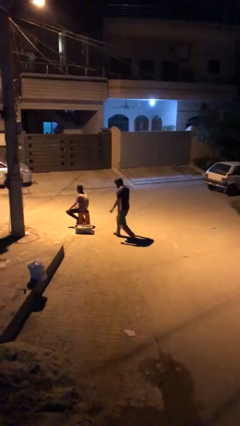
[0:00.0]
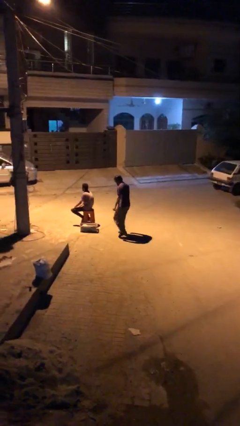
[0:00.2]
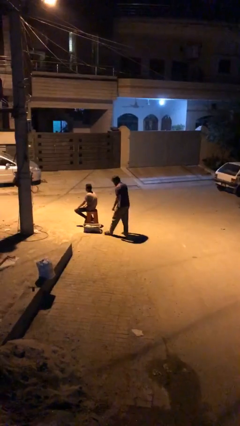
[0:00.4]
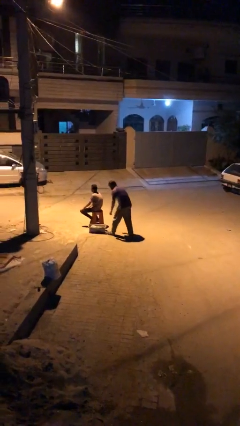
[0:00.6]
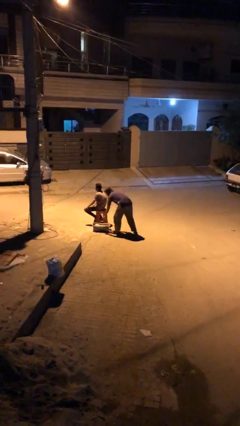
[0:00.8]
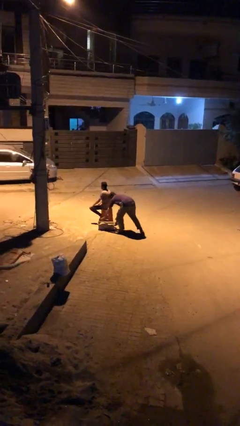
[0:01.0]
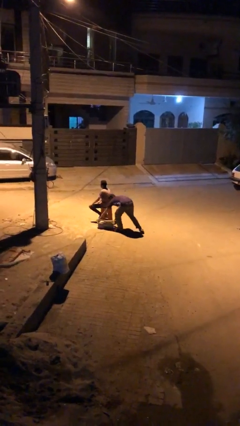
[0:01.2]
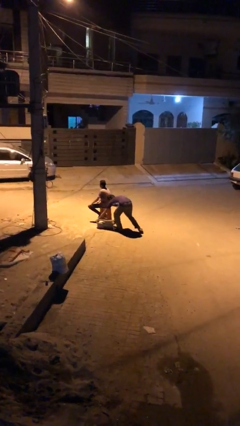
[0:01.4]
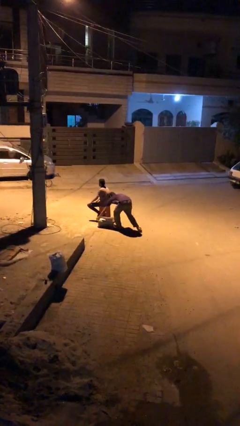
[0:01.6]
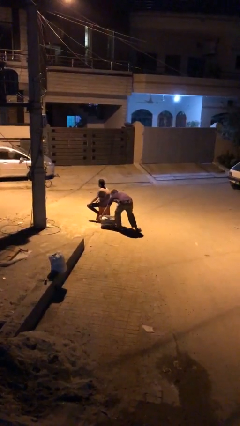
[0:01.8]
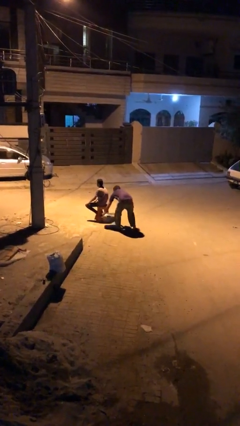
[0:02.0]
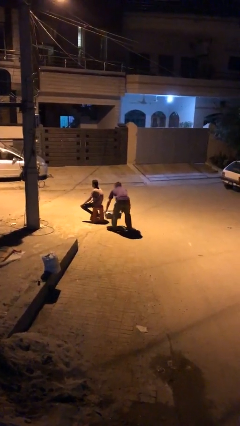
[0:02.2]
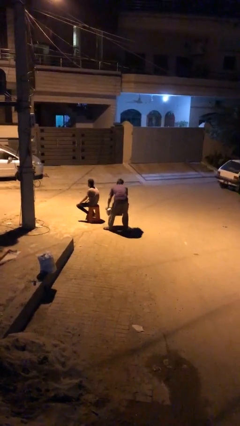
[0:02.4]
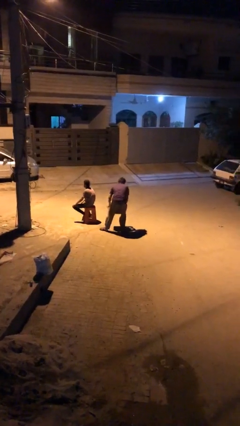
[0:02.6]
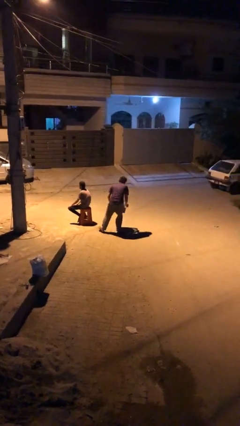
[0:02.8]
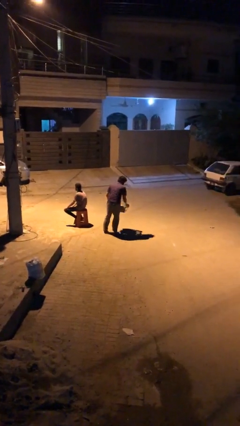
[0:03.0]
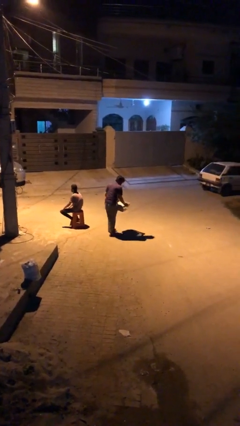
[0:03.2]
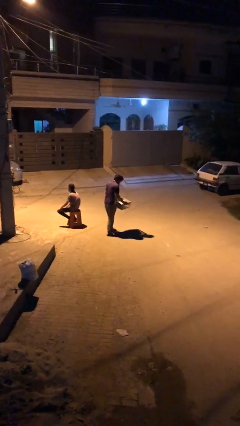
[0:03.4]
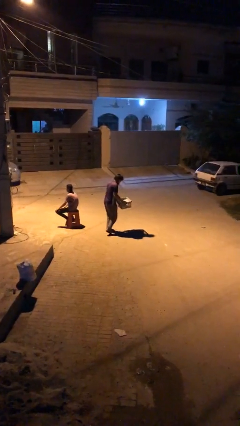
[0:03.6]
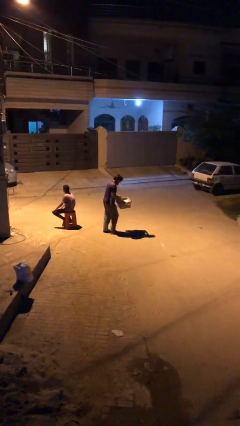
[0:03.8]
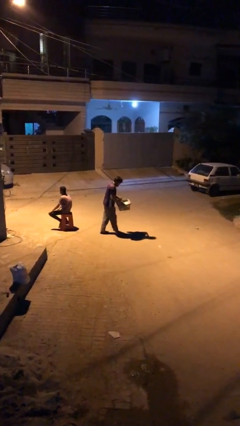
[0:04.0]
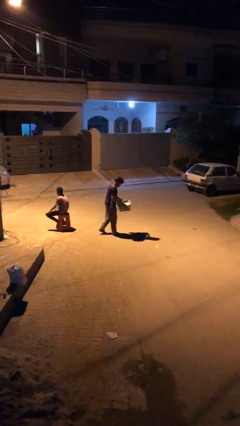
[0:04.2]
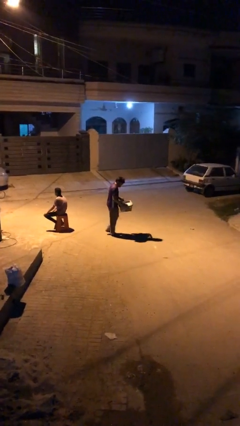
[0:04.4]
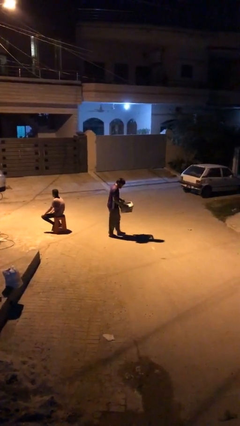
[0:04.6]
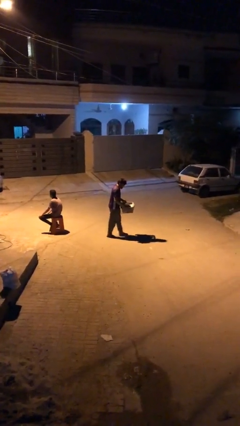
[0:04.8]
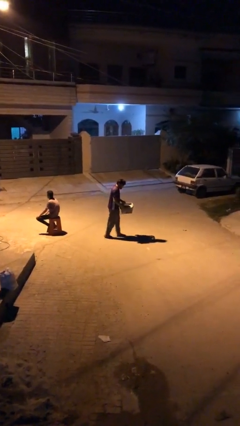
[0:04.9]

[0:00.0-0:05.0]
person steals object from person

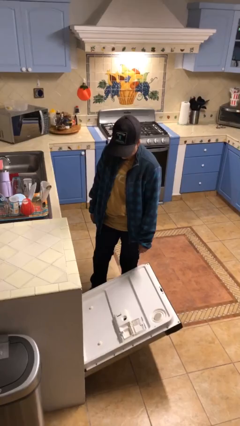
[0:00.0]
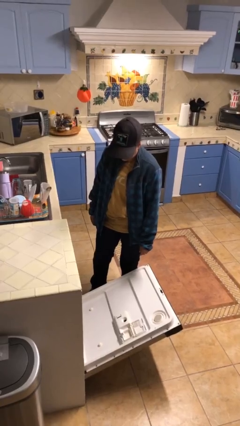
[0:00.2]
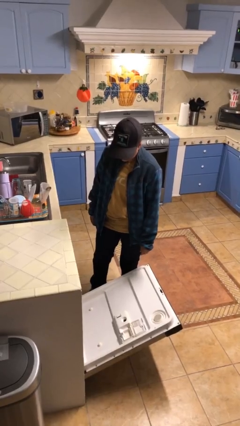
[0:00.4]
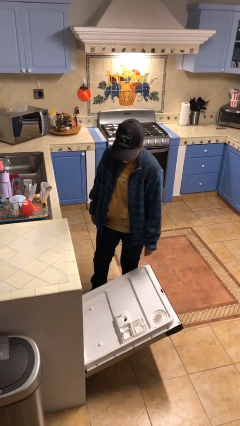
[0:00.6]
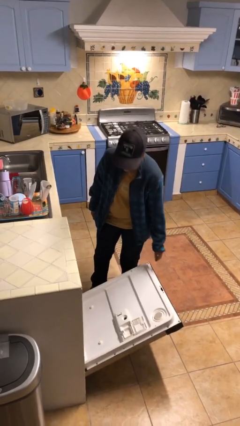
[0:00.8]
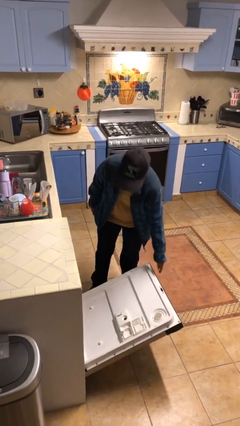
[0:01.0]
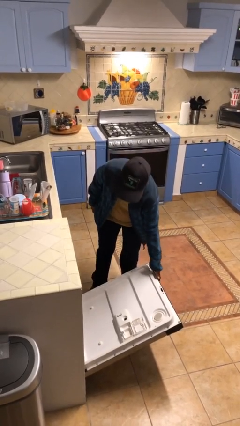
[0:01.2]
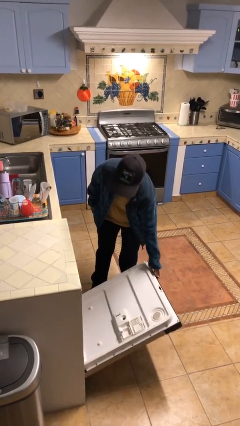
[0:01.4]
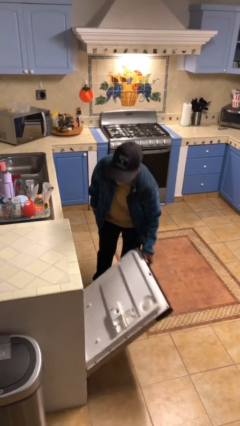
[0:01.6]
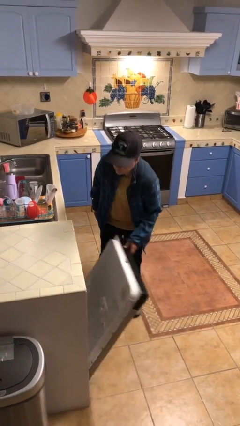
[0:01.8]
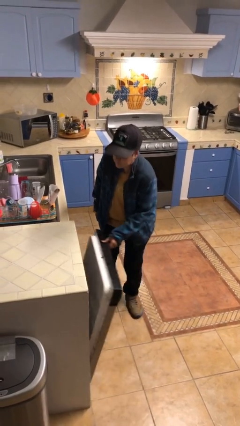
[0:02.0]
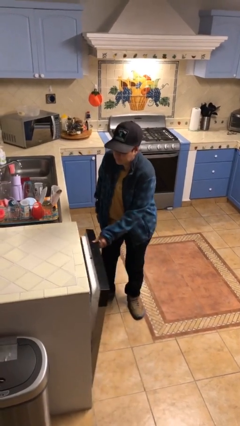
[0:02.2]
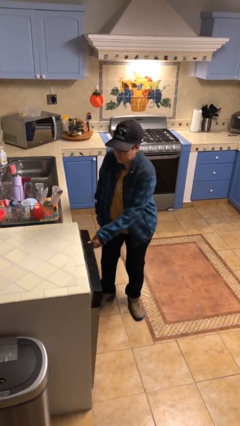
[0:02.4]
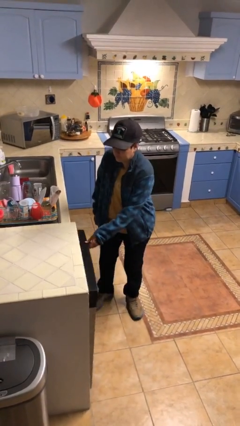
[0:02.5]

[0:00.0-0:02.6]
person closes dishwasher

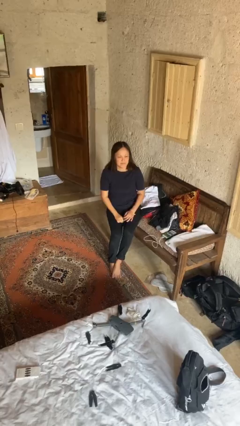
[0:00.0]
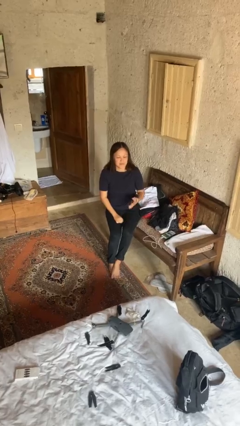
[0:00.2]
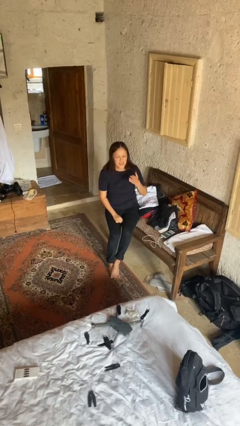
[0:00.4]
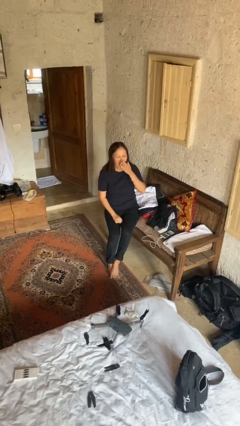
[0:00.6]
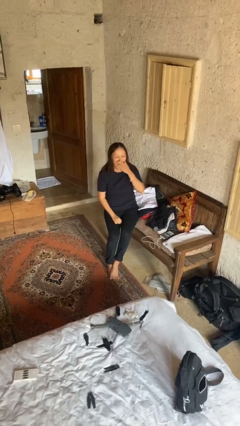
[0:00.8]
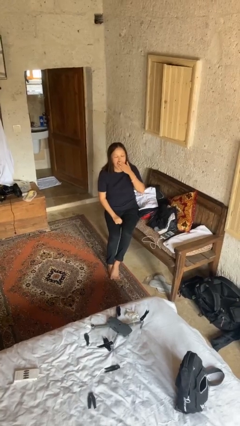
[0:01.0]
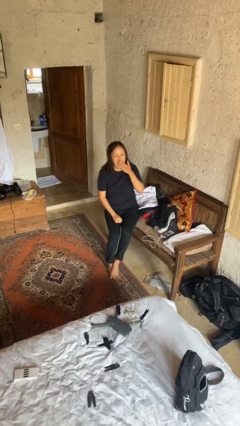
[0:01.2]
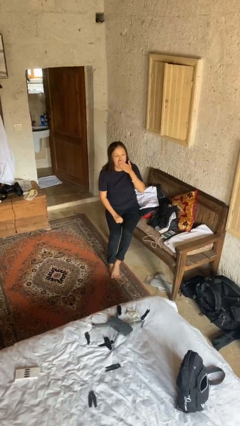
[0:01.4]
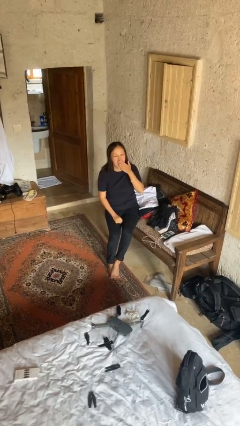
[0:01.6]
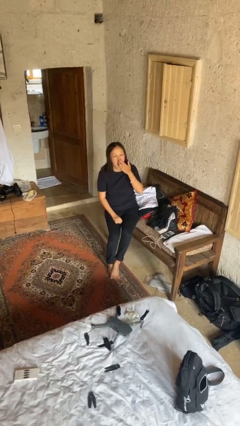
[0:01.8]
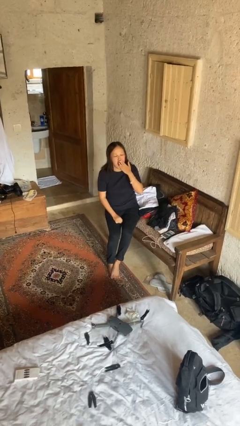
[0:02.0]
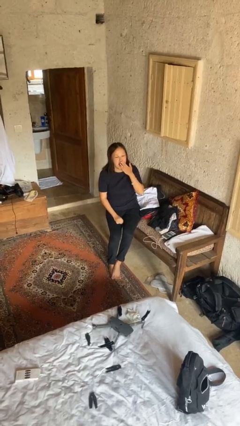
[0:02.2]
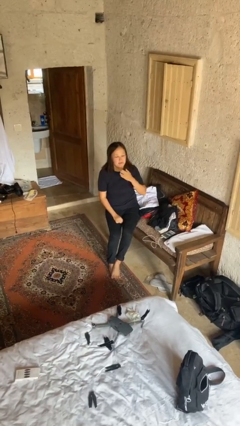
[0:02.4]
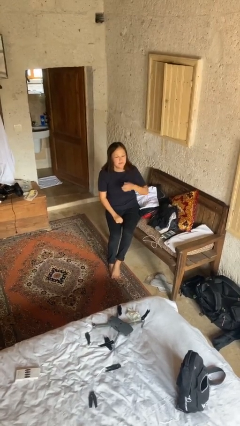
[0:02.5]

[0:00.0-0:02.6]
person yawns

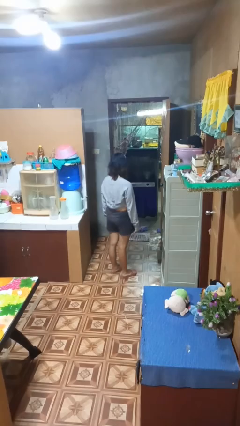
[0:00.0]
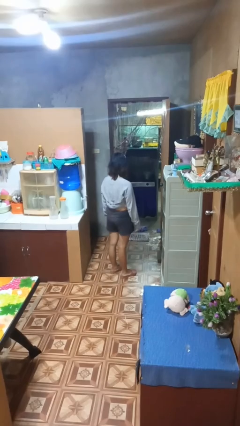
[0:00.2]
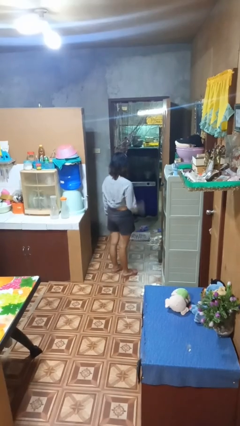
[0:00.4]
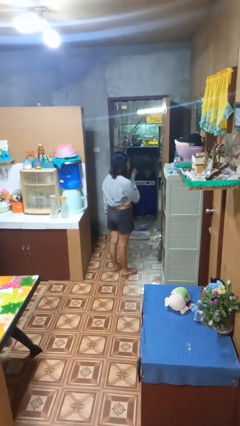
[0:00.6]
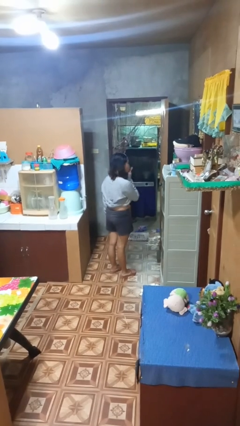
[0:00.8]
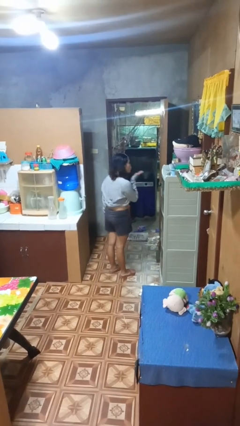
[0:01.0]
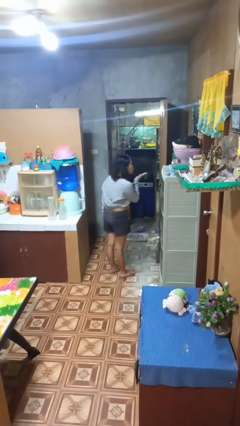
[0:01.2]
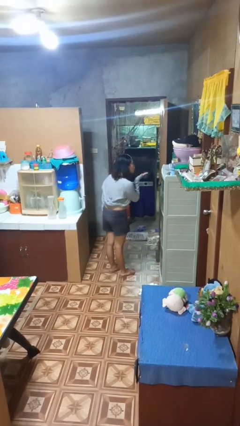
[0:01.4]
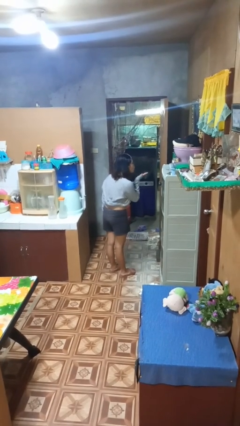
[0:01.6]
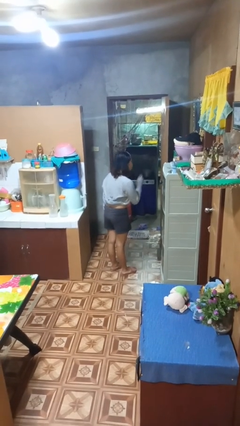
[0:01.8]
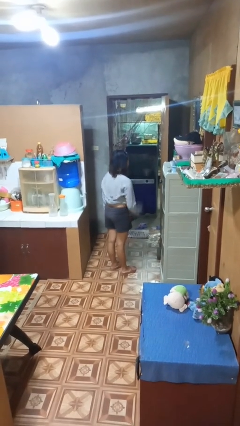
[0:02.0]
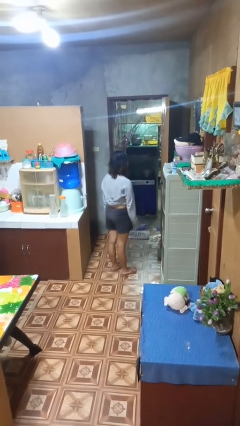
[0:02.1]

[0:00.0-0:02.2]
person gestures blow kiss

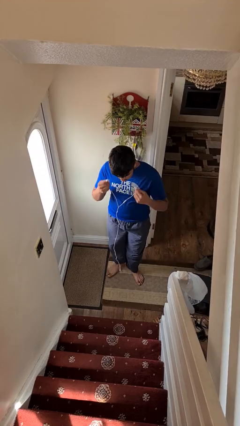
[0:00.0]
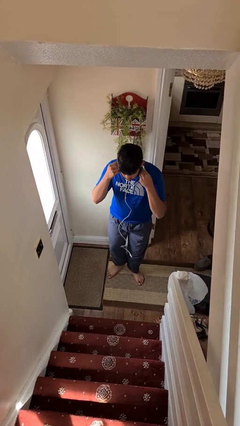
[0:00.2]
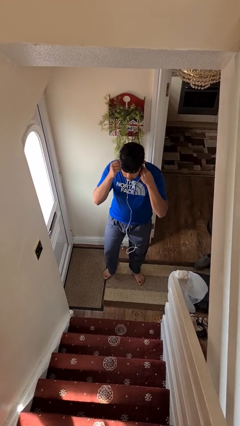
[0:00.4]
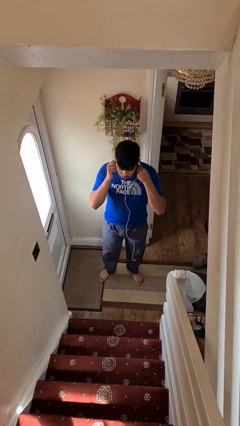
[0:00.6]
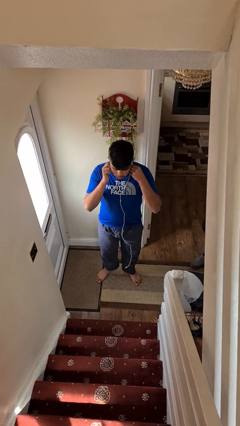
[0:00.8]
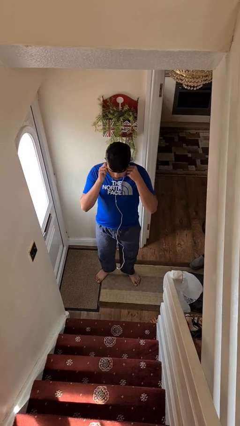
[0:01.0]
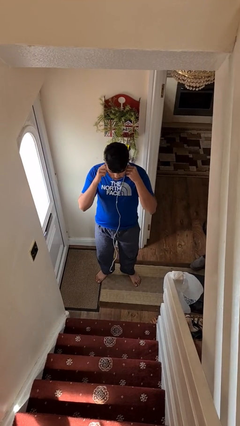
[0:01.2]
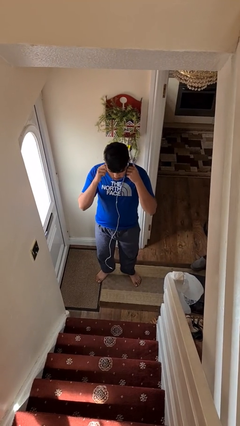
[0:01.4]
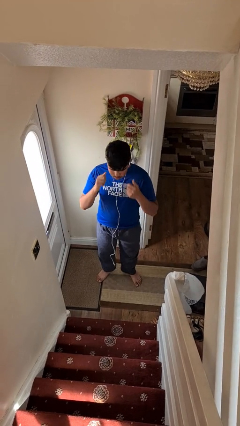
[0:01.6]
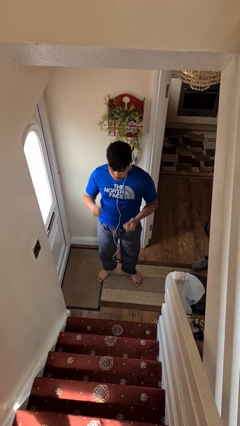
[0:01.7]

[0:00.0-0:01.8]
person puts on headphones

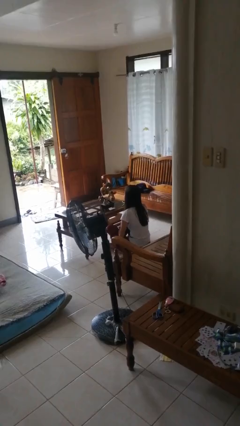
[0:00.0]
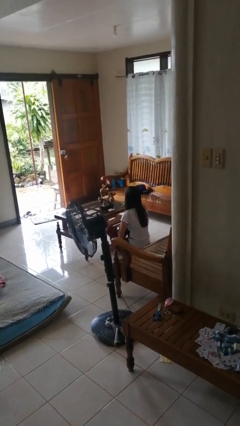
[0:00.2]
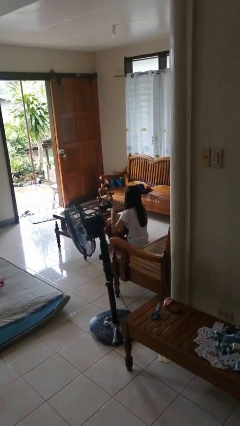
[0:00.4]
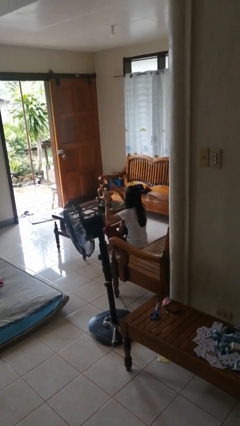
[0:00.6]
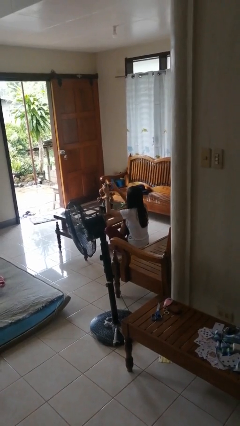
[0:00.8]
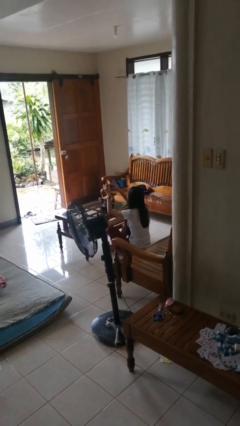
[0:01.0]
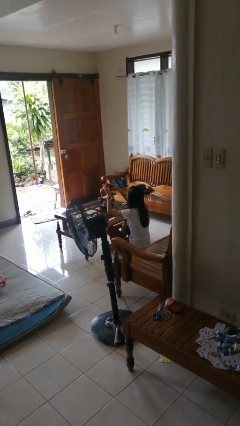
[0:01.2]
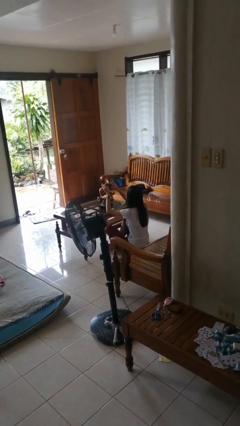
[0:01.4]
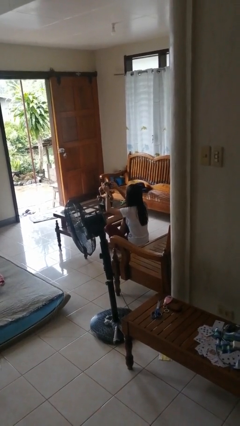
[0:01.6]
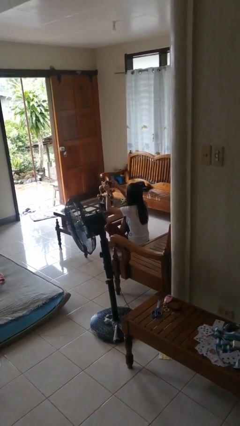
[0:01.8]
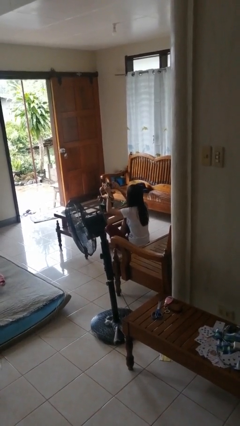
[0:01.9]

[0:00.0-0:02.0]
person arranges flowers in vase

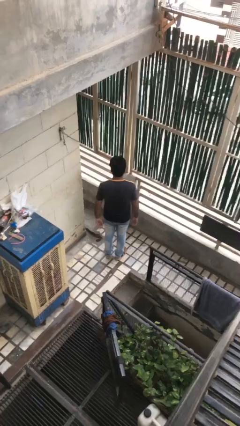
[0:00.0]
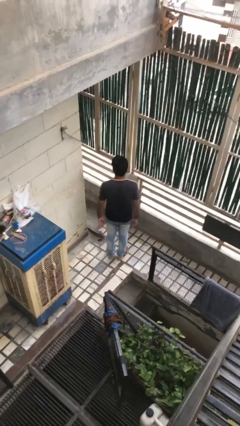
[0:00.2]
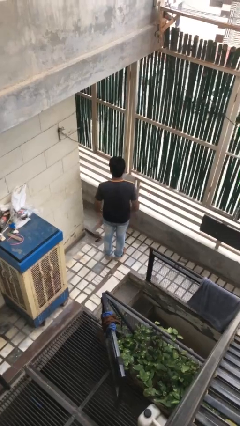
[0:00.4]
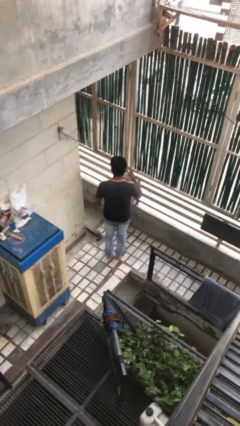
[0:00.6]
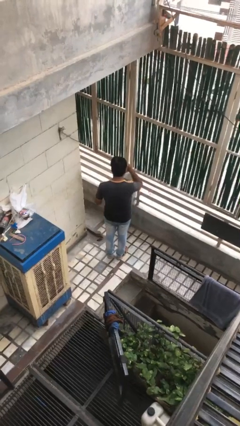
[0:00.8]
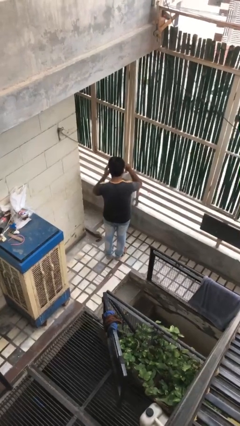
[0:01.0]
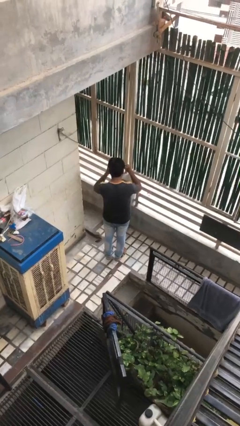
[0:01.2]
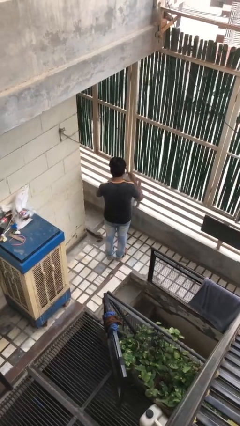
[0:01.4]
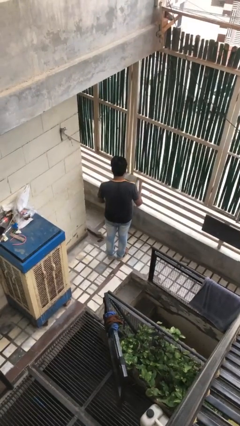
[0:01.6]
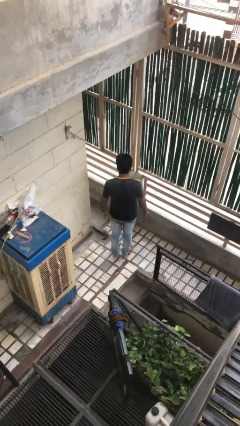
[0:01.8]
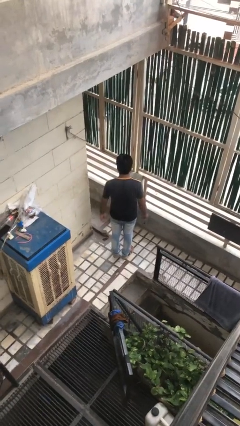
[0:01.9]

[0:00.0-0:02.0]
person takes off glasses
